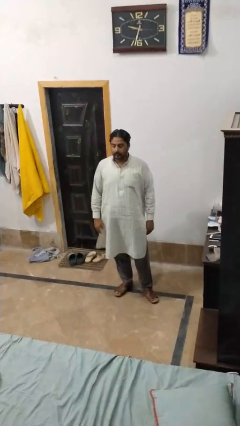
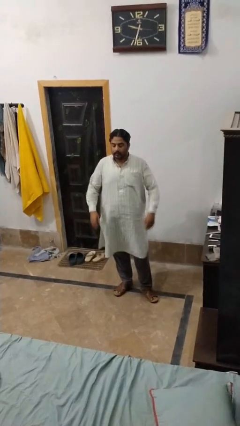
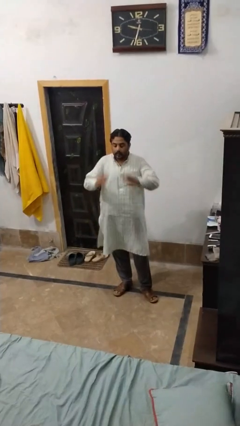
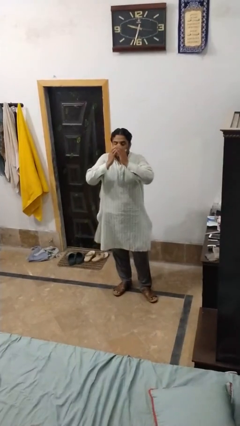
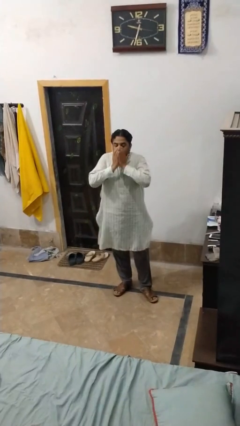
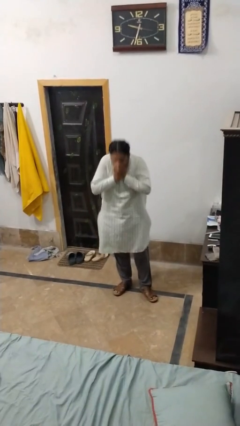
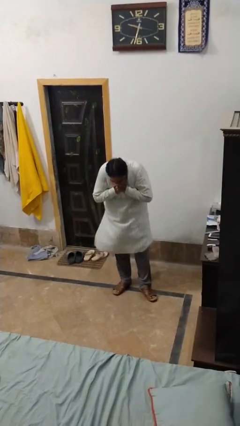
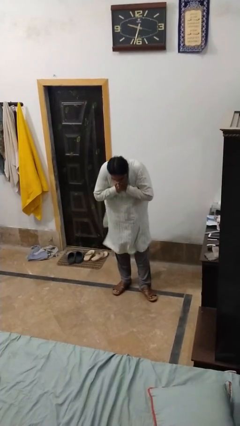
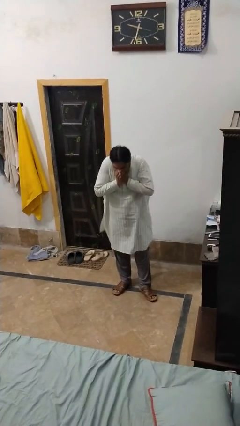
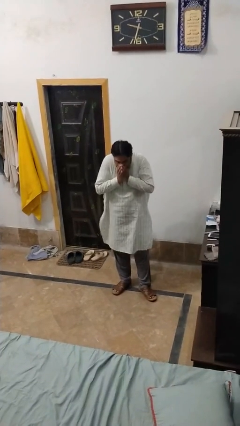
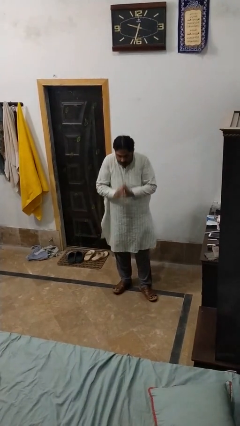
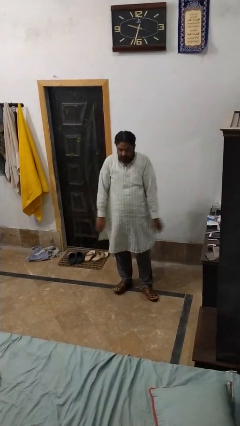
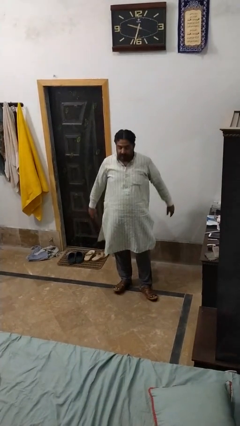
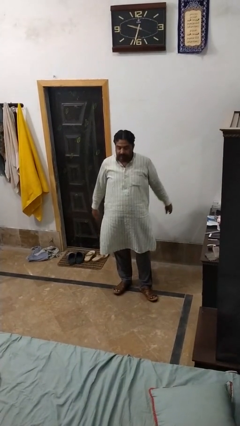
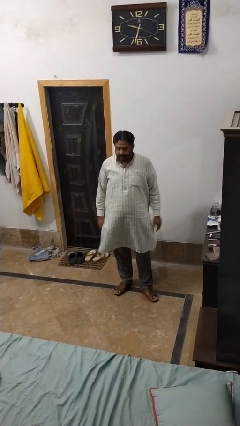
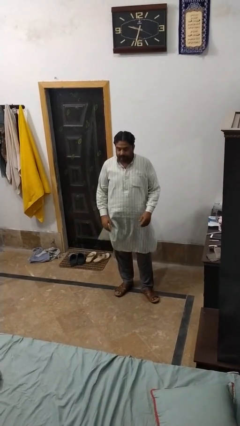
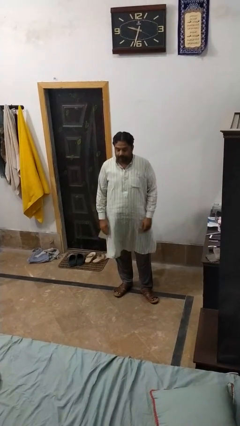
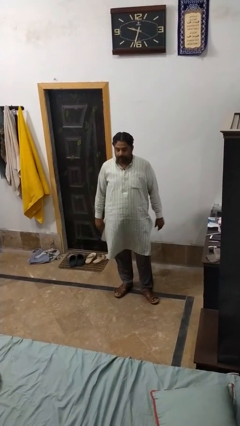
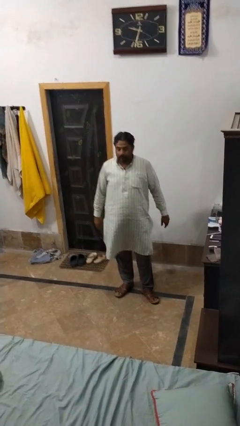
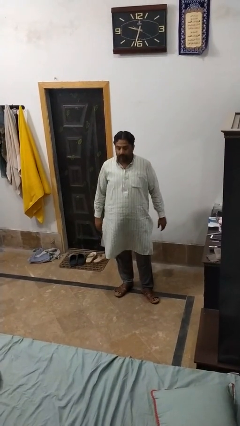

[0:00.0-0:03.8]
person sneezes into hand

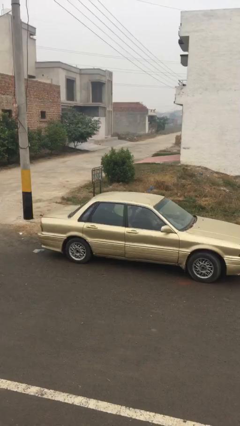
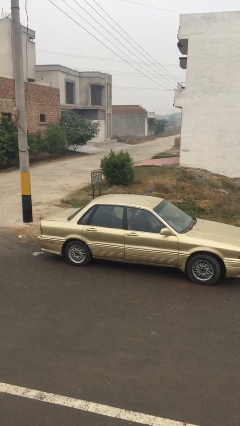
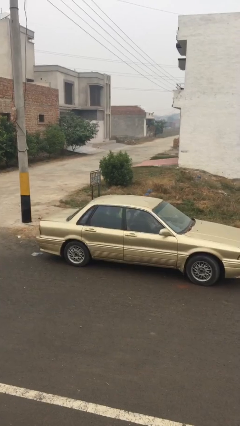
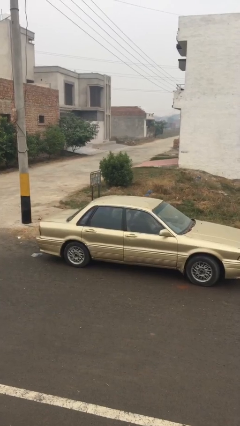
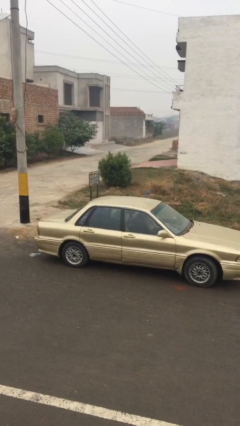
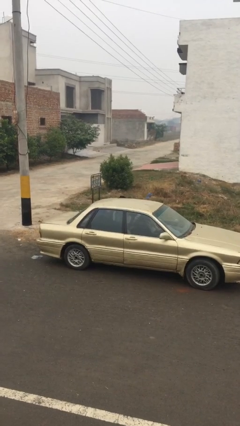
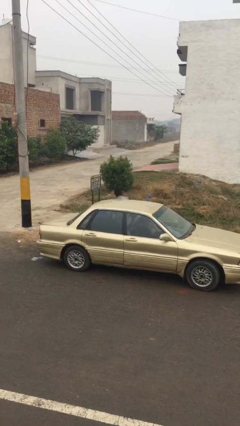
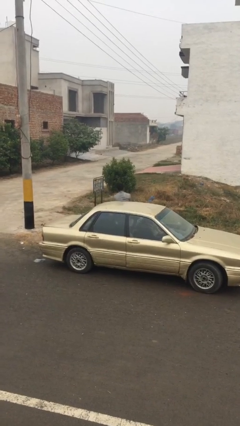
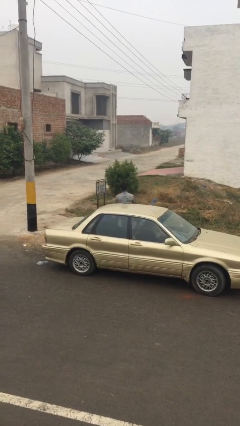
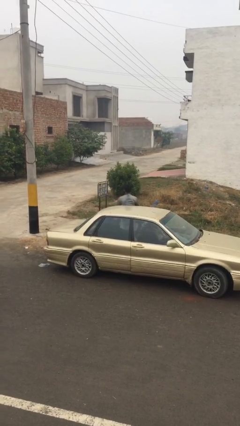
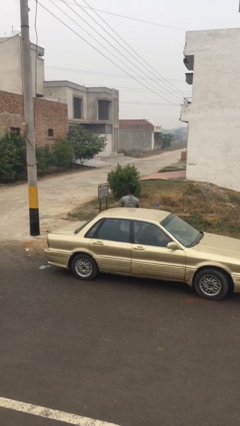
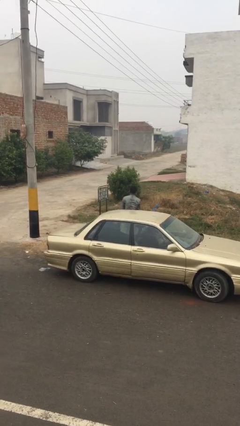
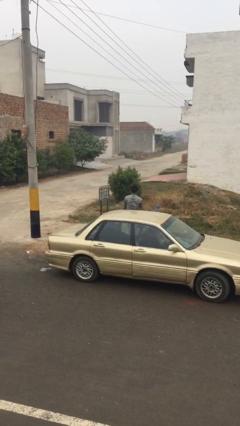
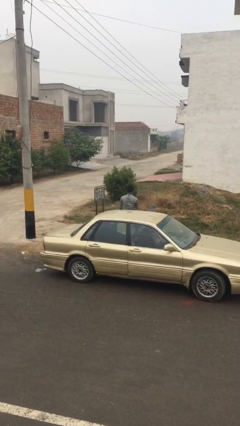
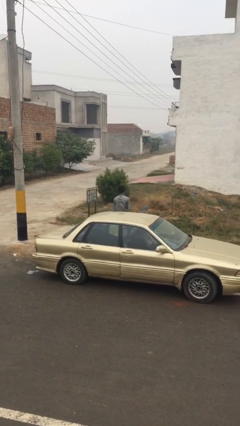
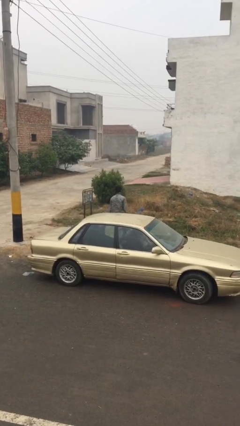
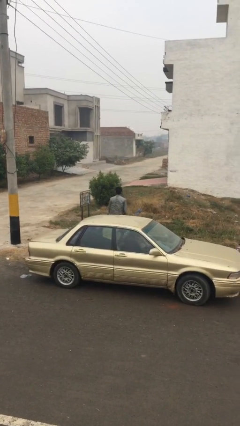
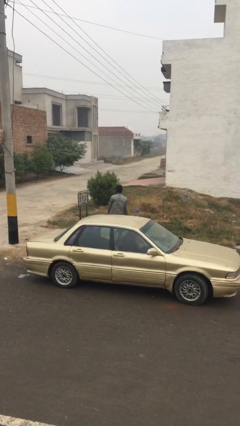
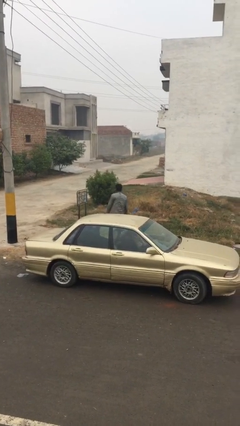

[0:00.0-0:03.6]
person exits car

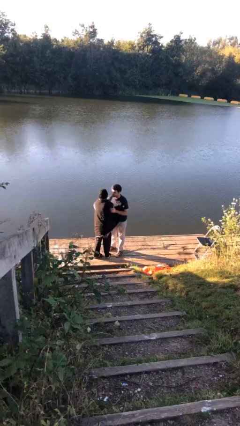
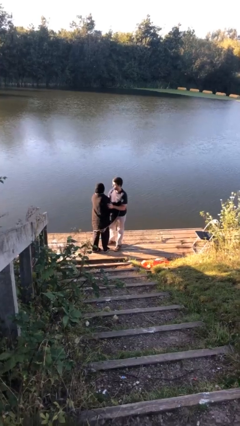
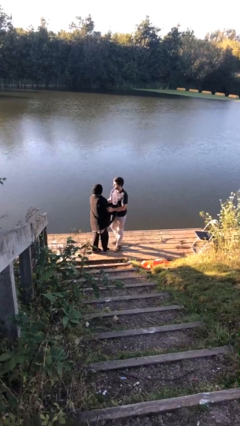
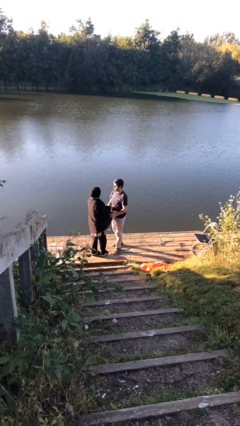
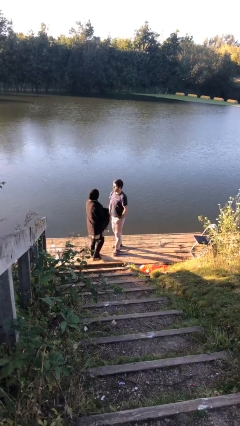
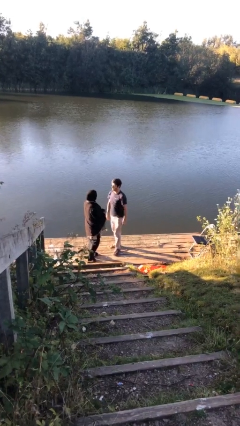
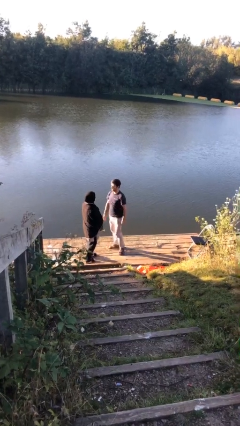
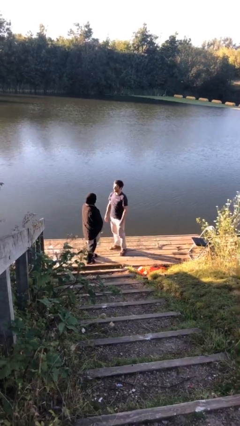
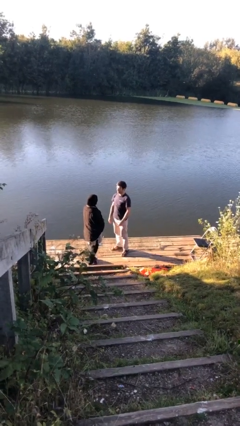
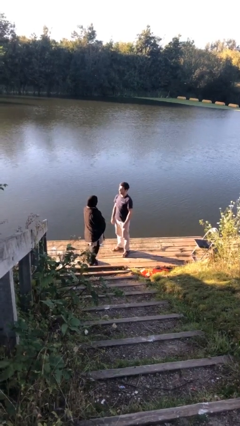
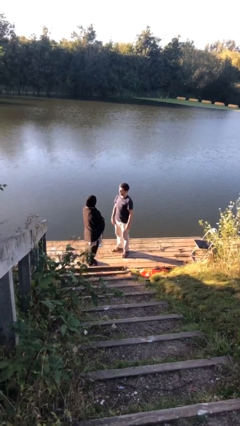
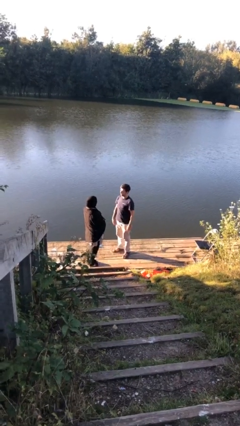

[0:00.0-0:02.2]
person talks to person

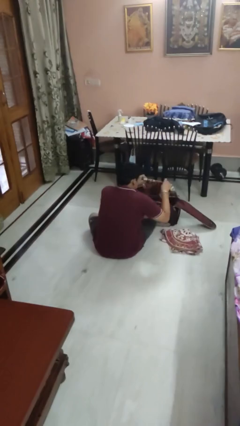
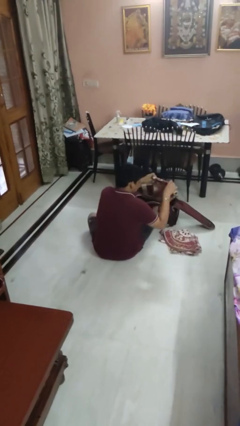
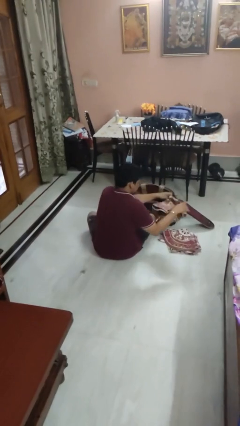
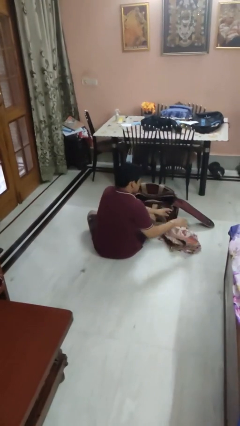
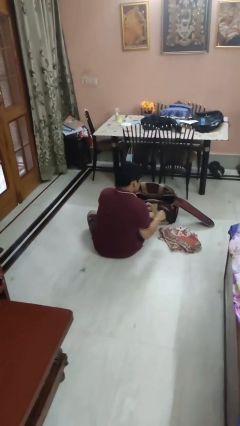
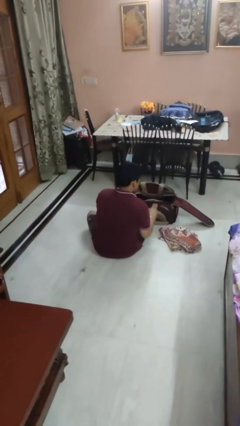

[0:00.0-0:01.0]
person unloads clothes from suitcase

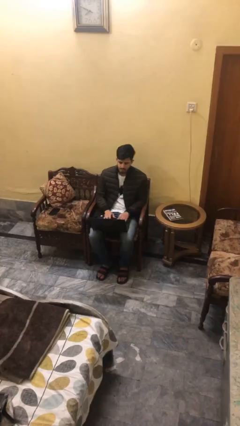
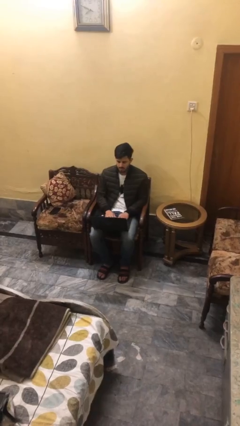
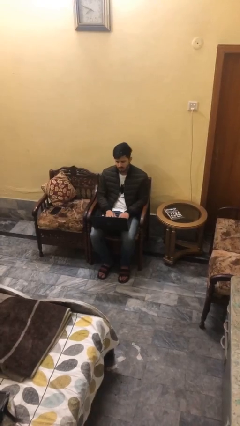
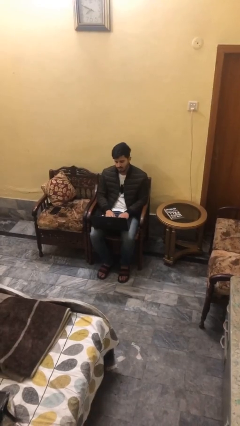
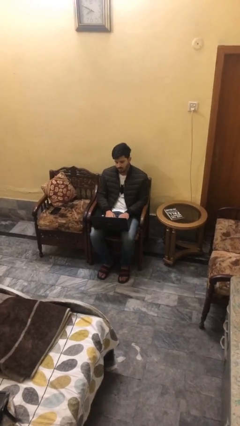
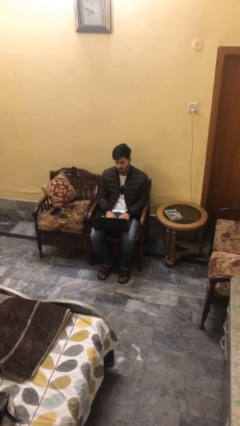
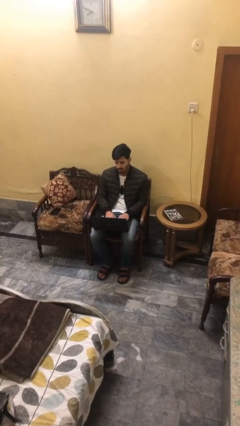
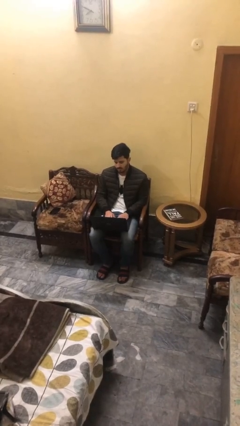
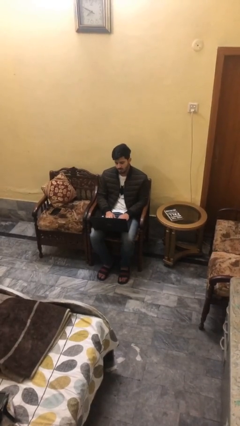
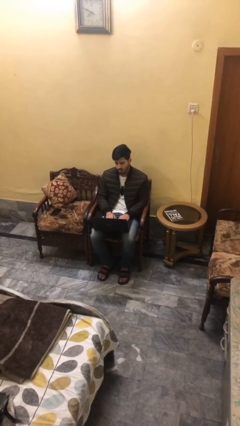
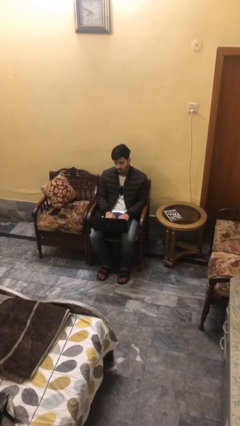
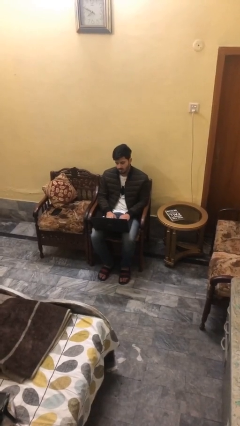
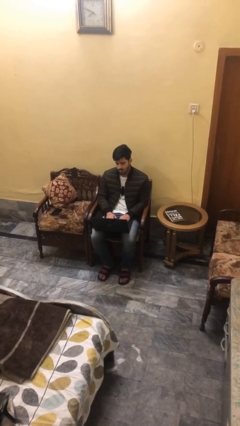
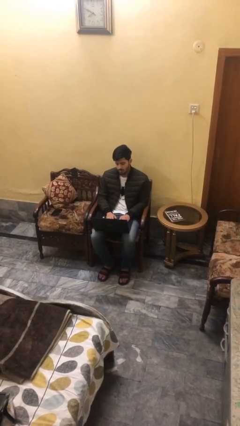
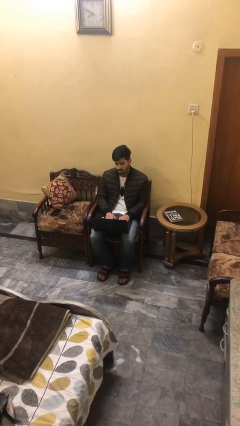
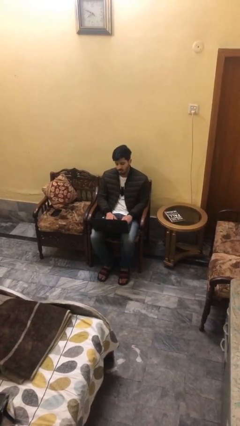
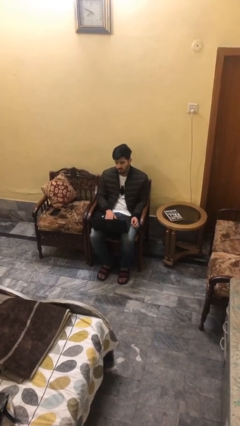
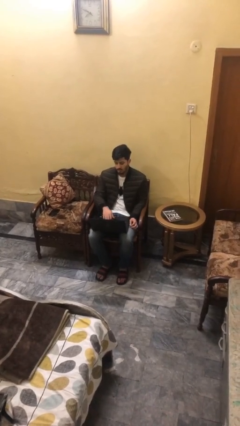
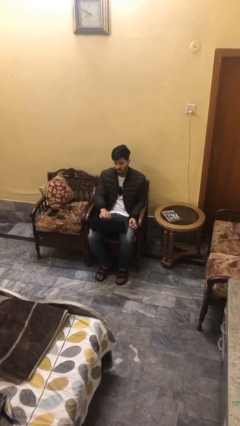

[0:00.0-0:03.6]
person interacts with laptop

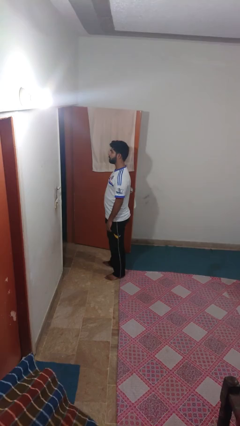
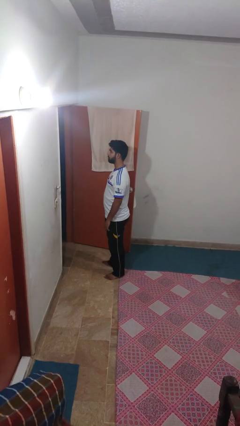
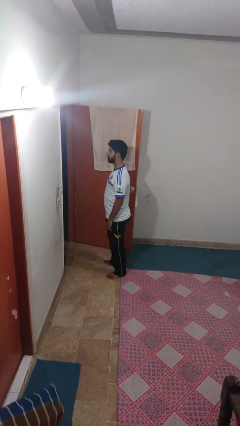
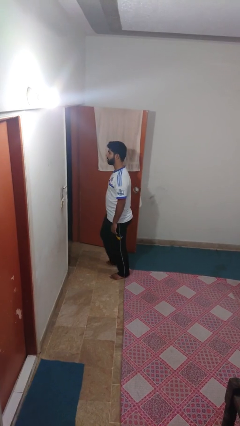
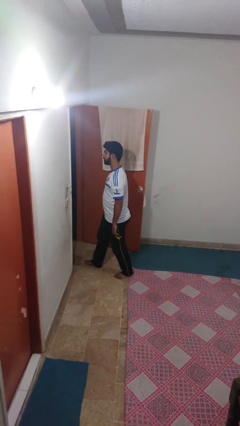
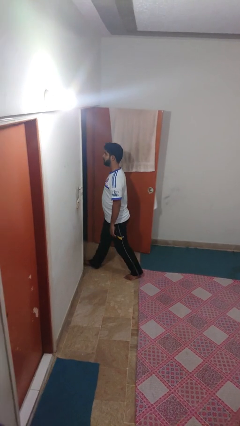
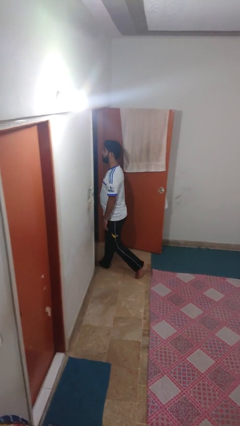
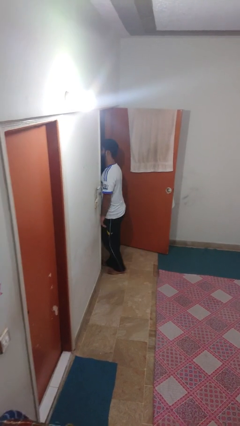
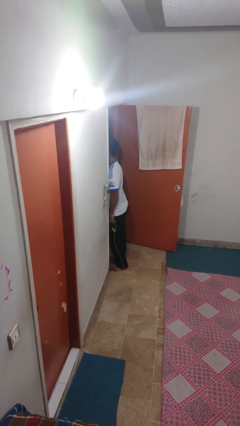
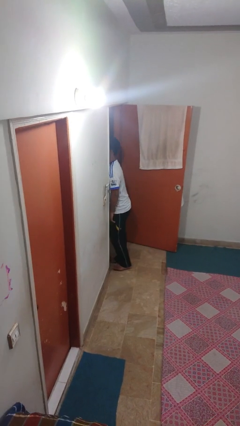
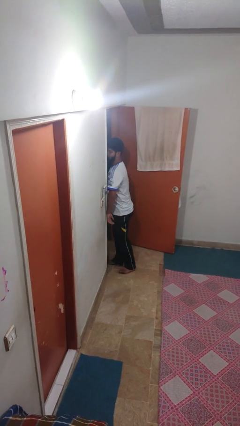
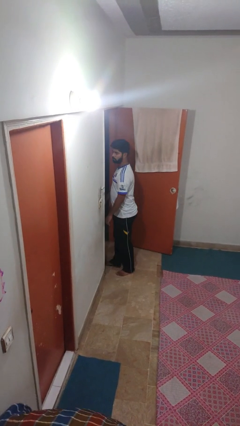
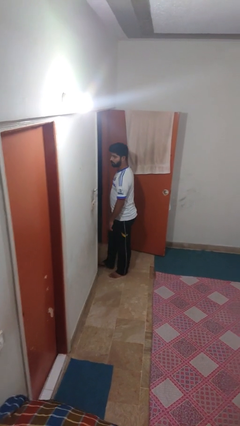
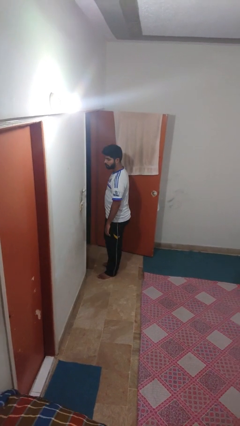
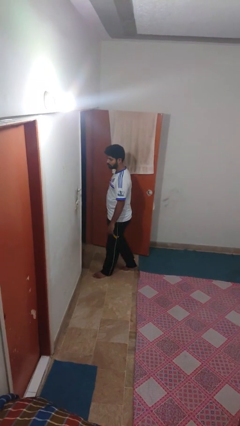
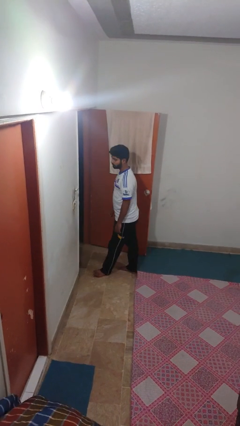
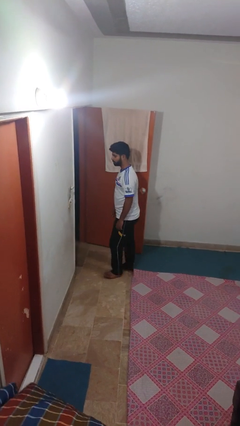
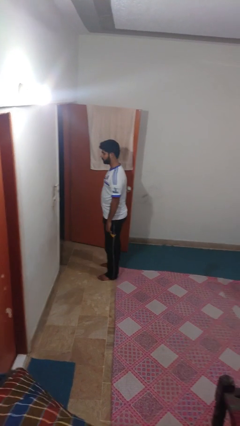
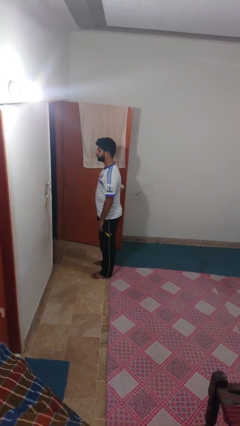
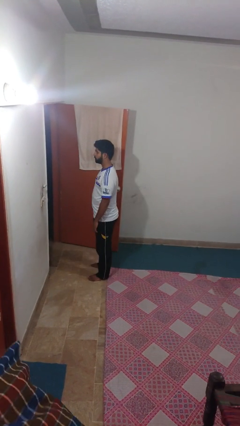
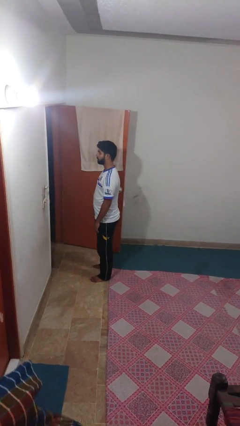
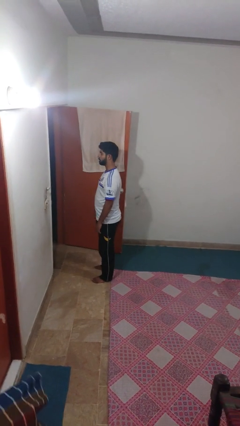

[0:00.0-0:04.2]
person bumps into wall
